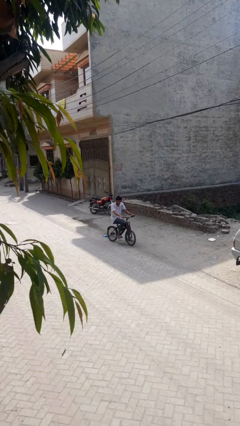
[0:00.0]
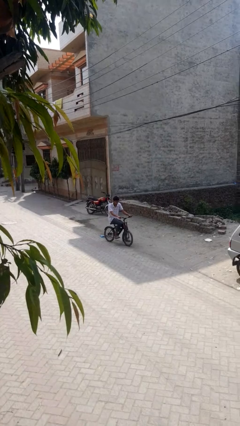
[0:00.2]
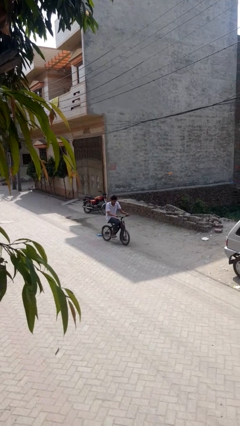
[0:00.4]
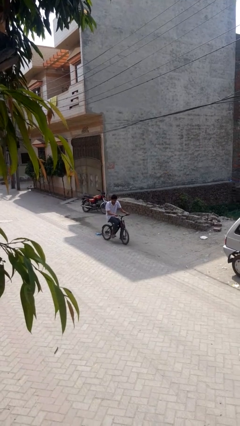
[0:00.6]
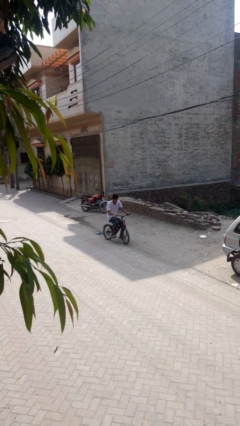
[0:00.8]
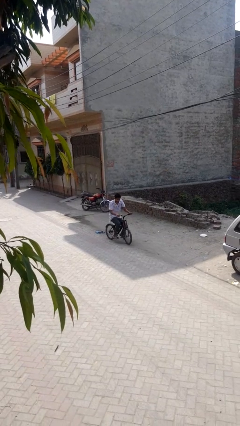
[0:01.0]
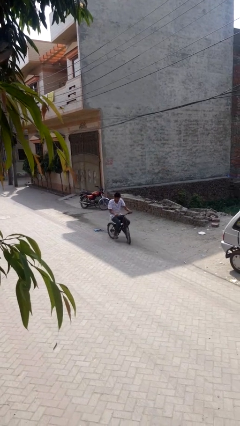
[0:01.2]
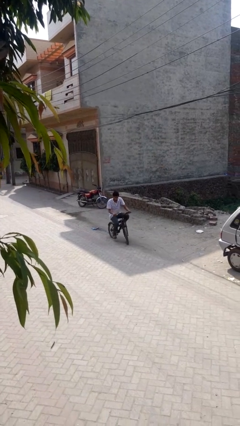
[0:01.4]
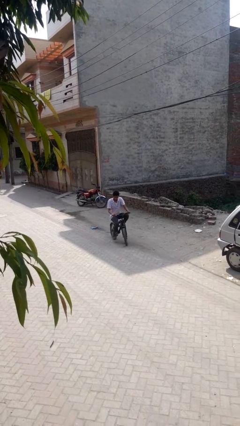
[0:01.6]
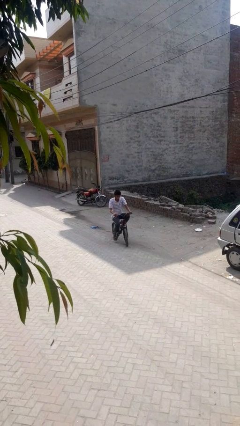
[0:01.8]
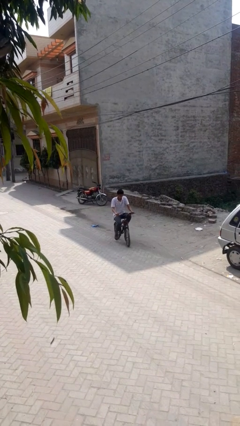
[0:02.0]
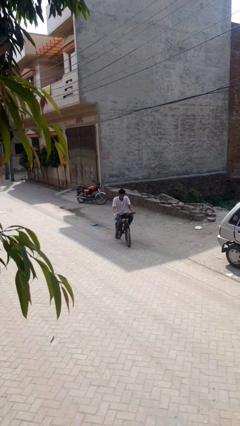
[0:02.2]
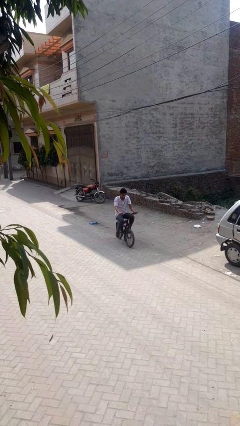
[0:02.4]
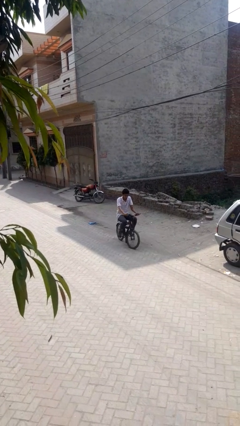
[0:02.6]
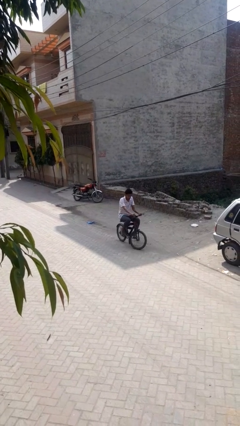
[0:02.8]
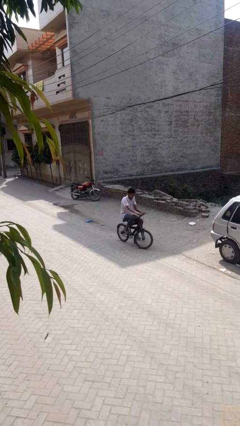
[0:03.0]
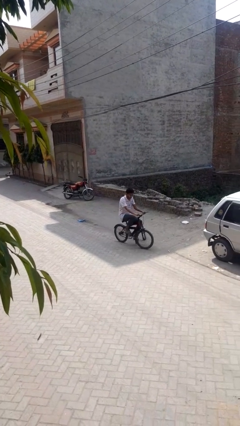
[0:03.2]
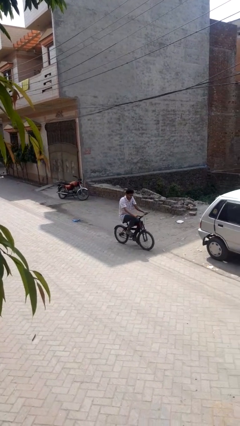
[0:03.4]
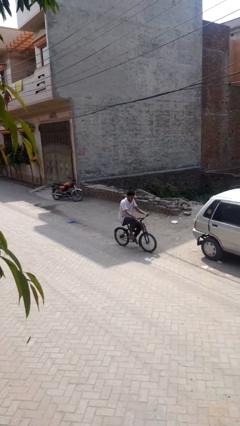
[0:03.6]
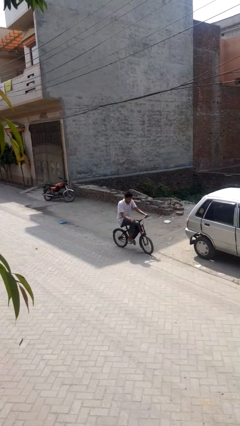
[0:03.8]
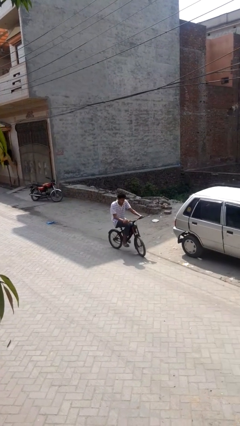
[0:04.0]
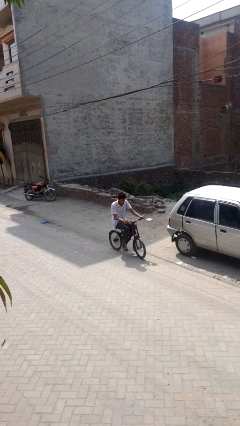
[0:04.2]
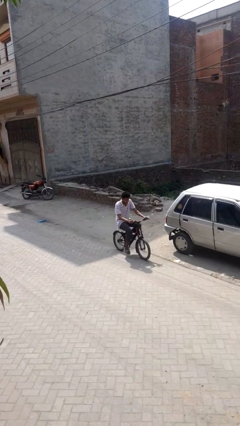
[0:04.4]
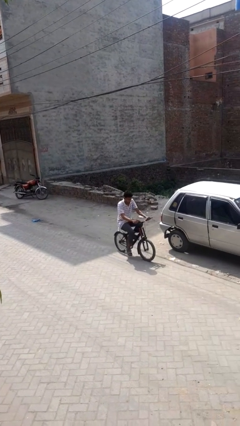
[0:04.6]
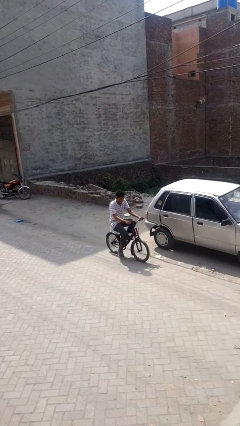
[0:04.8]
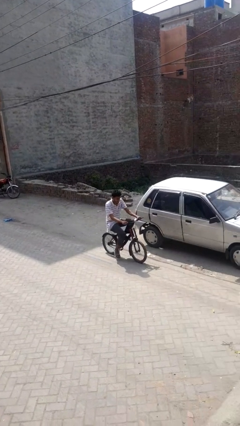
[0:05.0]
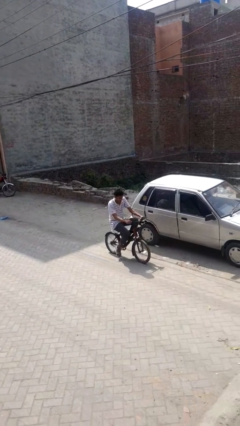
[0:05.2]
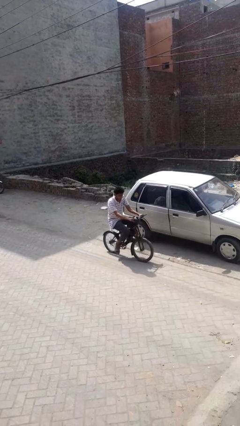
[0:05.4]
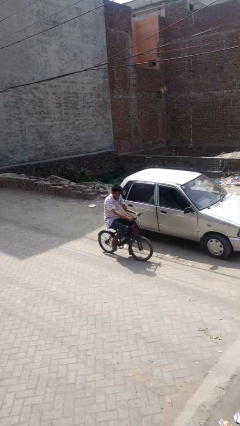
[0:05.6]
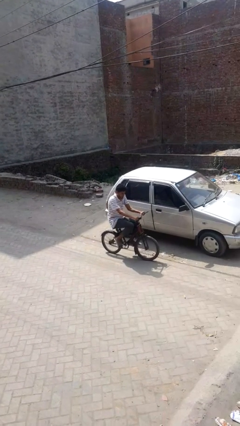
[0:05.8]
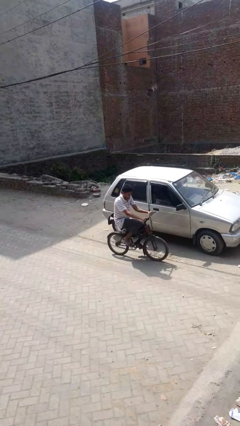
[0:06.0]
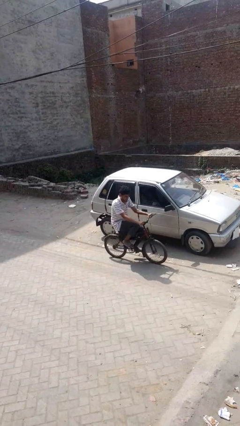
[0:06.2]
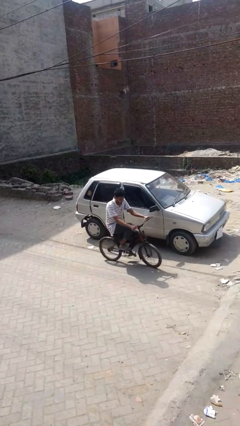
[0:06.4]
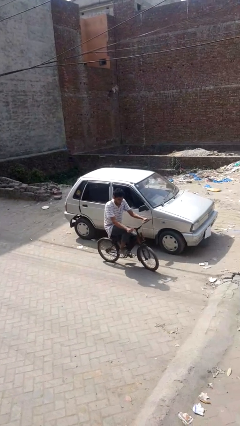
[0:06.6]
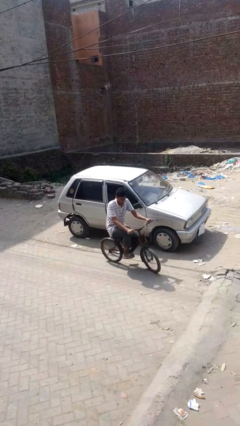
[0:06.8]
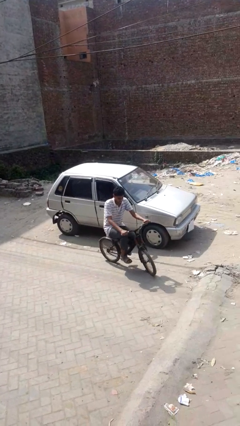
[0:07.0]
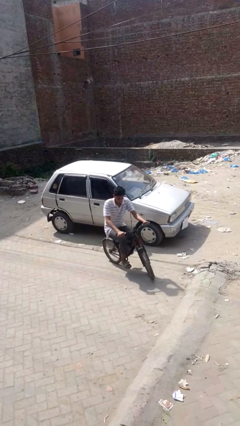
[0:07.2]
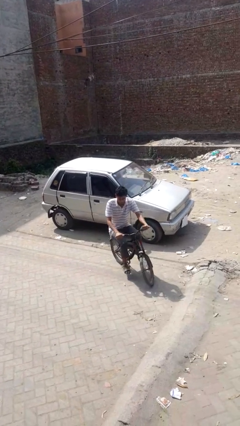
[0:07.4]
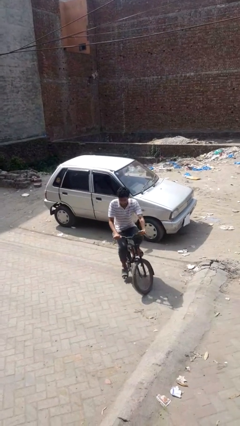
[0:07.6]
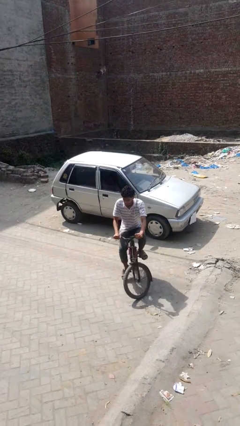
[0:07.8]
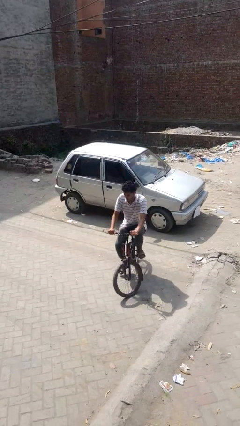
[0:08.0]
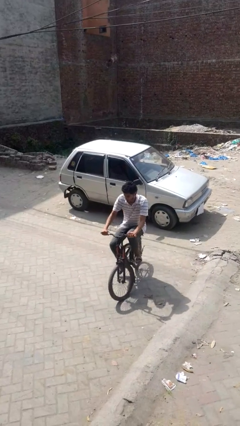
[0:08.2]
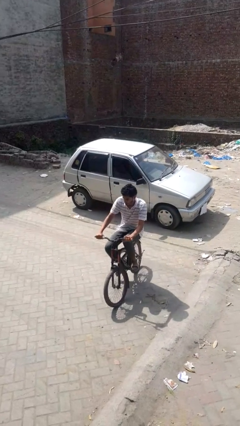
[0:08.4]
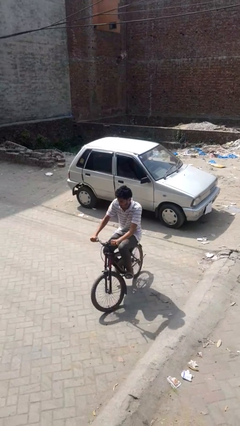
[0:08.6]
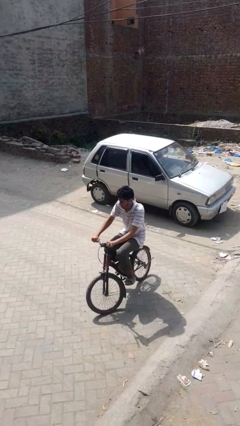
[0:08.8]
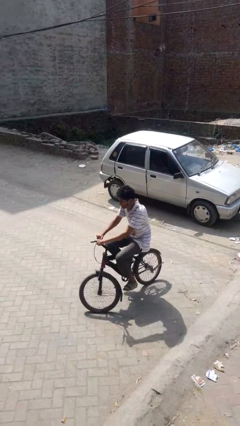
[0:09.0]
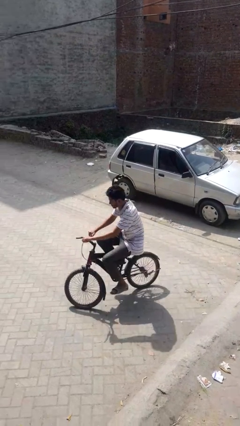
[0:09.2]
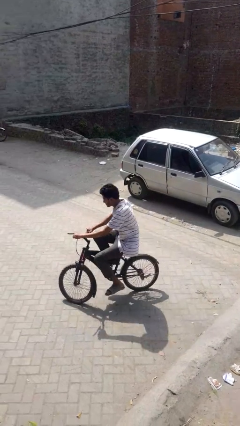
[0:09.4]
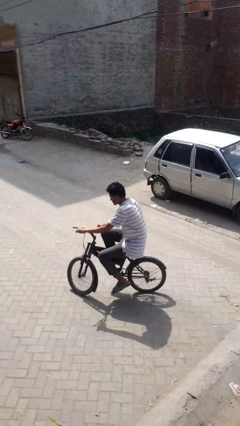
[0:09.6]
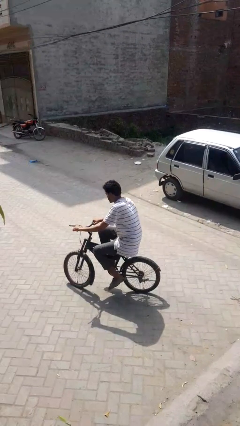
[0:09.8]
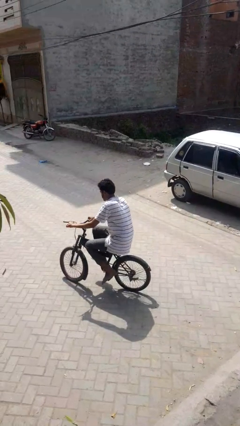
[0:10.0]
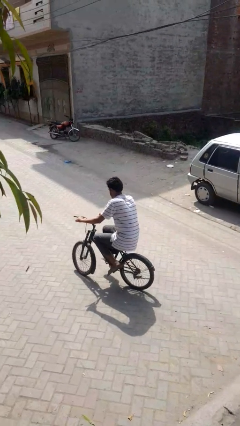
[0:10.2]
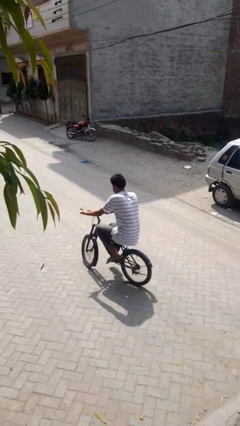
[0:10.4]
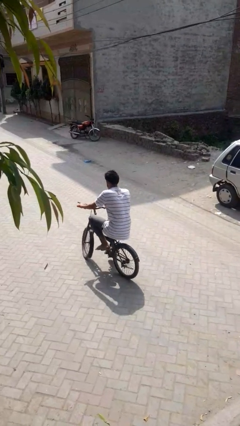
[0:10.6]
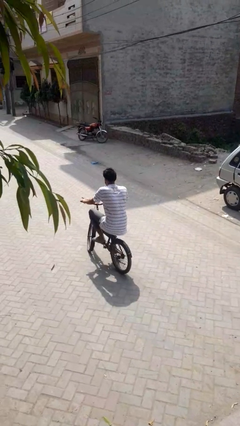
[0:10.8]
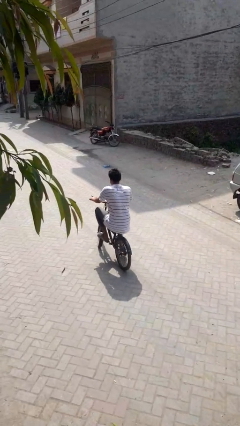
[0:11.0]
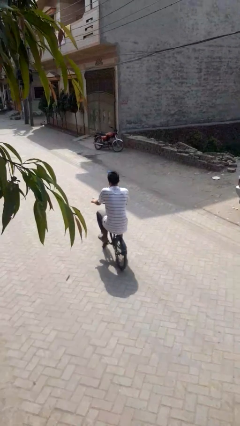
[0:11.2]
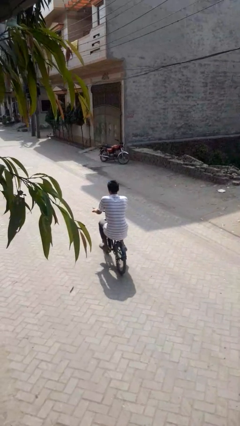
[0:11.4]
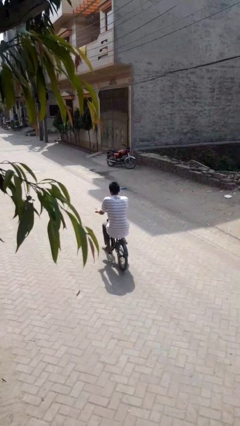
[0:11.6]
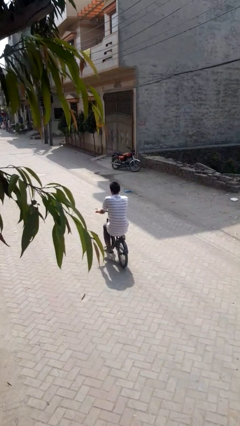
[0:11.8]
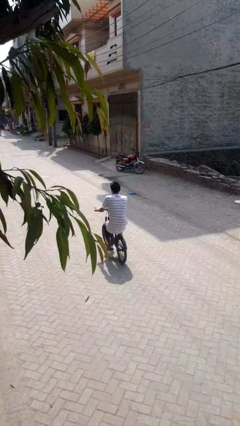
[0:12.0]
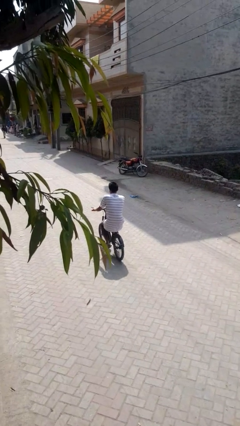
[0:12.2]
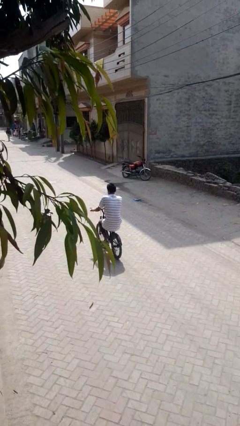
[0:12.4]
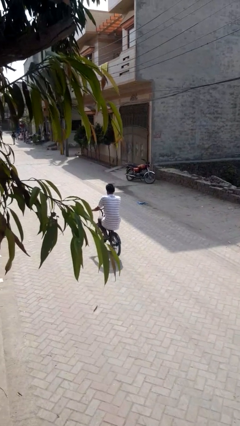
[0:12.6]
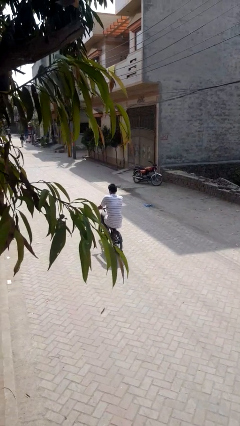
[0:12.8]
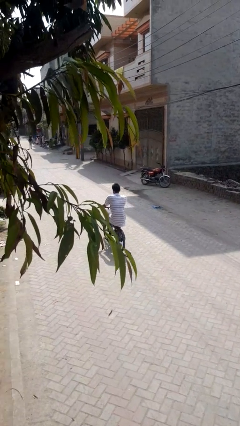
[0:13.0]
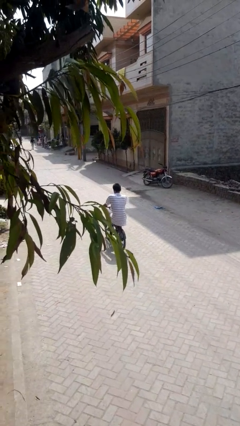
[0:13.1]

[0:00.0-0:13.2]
person rides bicycle

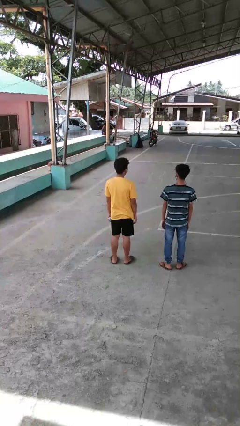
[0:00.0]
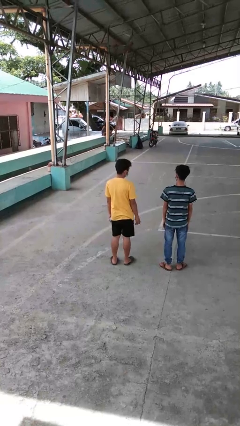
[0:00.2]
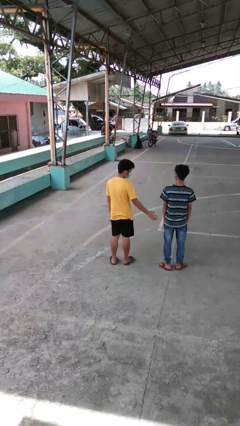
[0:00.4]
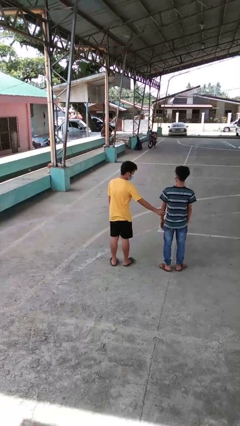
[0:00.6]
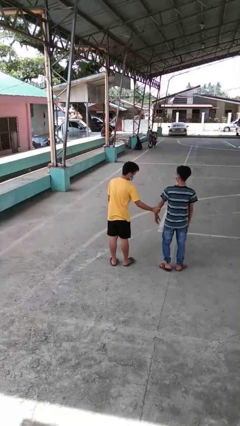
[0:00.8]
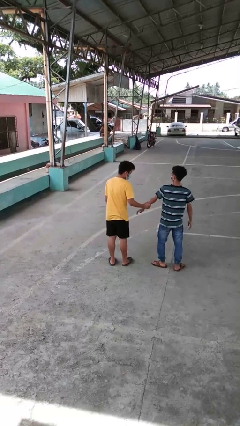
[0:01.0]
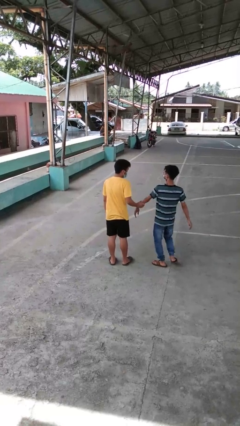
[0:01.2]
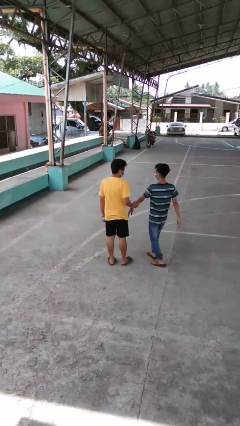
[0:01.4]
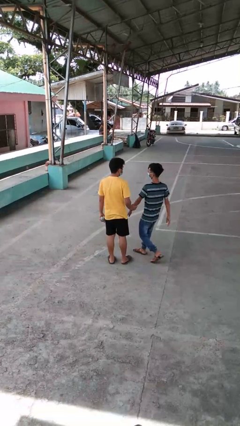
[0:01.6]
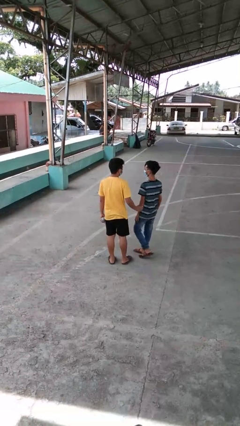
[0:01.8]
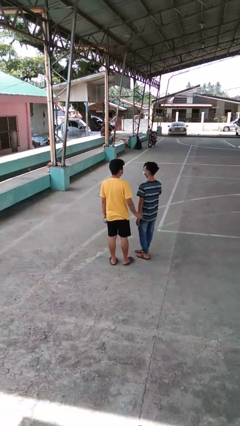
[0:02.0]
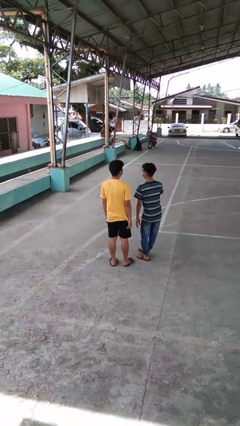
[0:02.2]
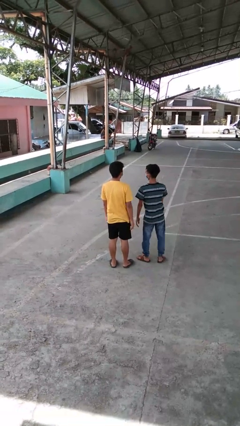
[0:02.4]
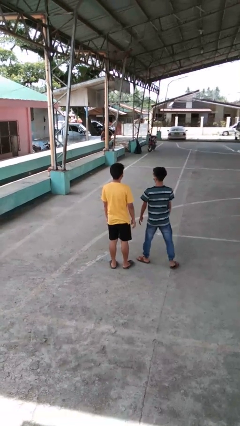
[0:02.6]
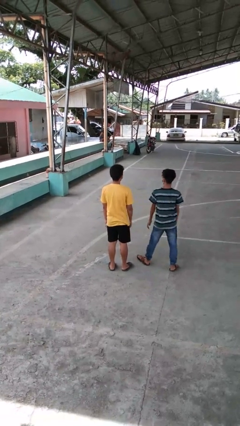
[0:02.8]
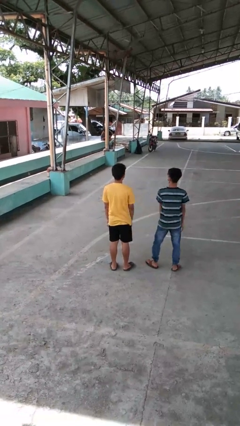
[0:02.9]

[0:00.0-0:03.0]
person grabs person by forearm

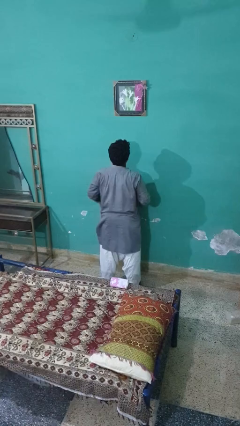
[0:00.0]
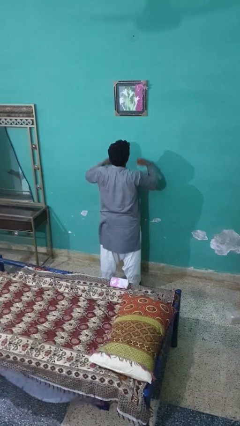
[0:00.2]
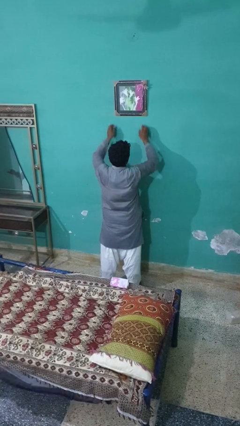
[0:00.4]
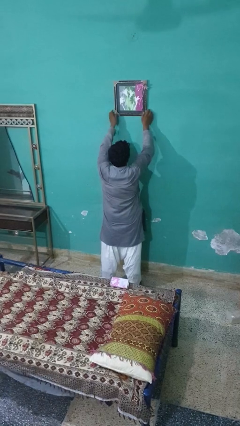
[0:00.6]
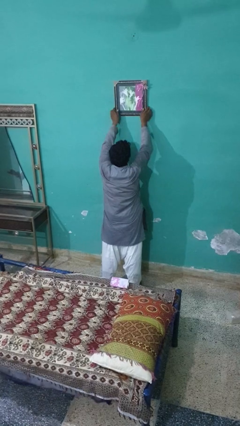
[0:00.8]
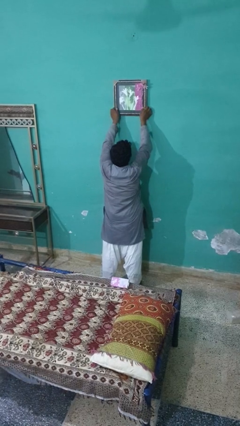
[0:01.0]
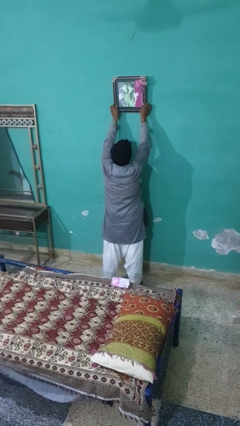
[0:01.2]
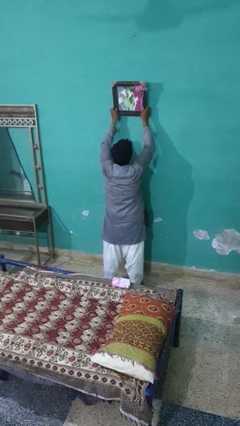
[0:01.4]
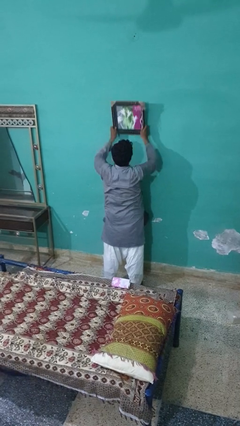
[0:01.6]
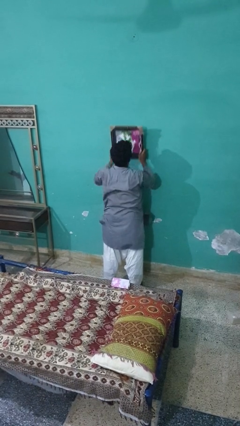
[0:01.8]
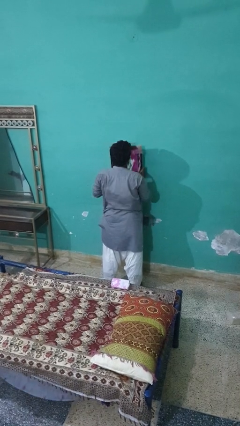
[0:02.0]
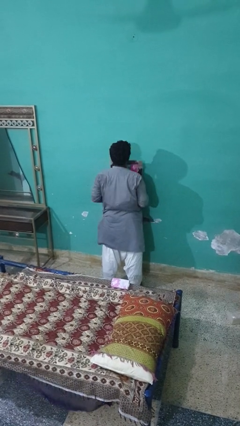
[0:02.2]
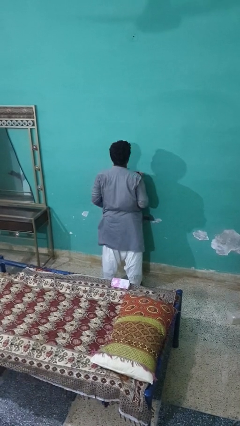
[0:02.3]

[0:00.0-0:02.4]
person takes down picture frame
